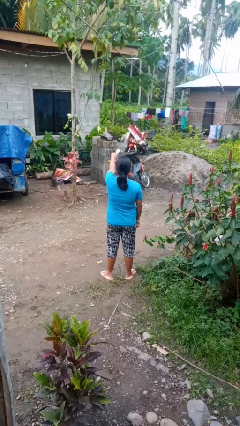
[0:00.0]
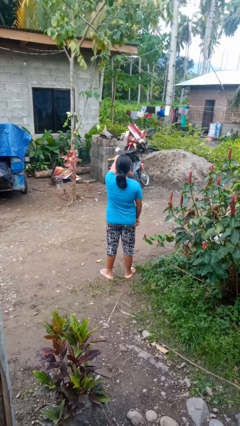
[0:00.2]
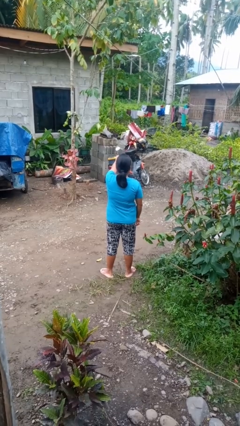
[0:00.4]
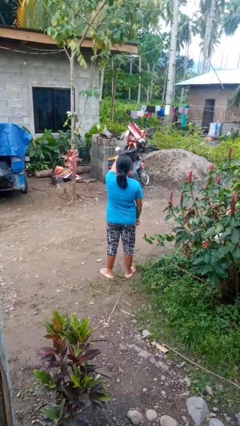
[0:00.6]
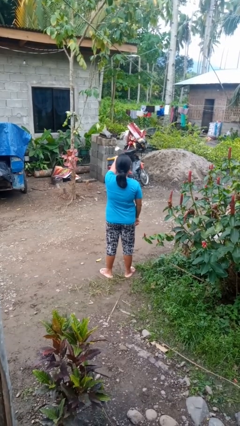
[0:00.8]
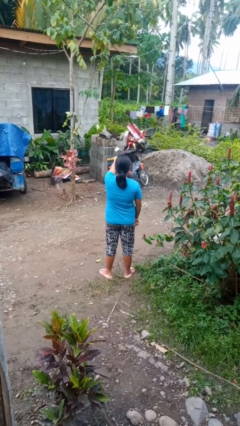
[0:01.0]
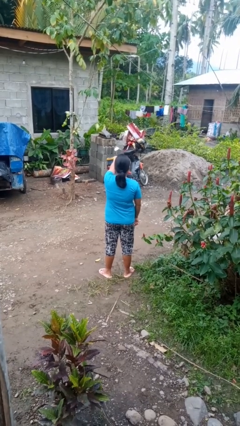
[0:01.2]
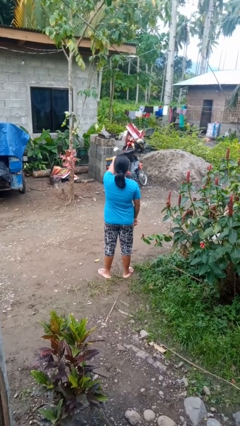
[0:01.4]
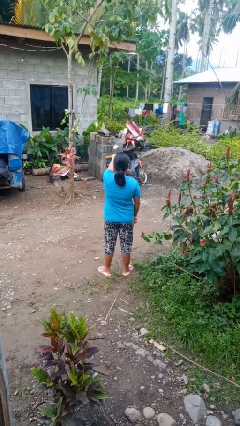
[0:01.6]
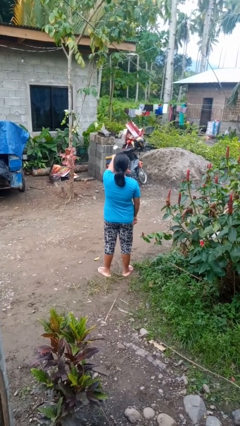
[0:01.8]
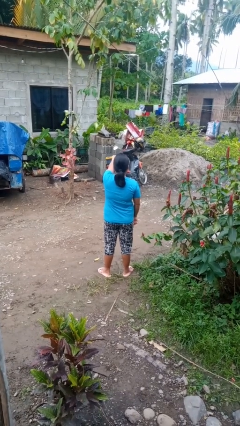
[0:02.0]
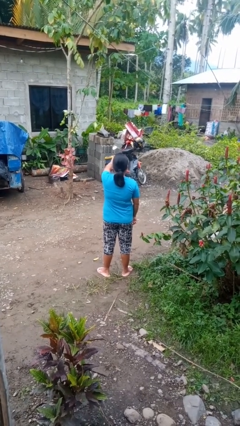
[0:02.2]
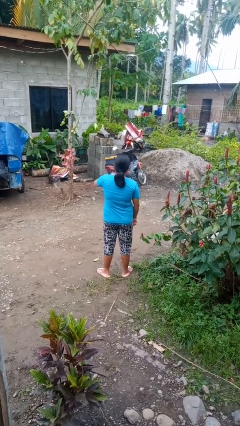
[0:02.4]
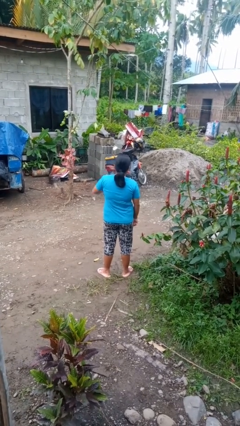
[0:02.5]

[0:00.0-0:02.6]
person gestures thumbs down

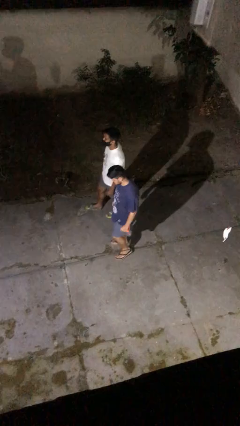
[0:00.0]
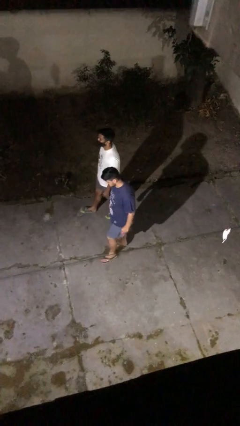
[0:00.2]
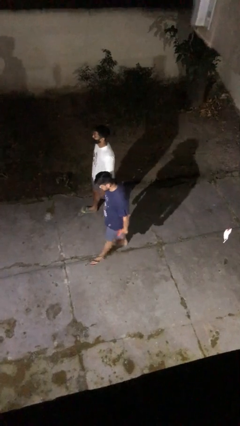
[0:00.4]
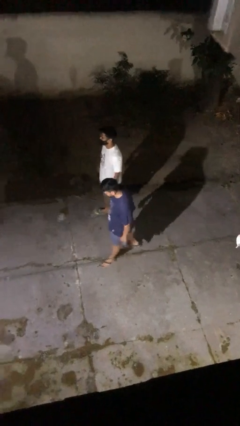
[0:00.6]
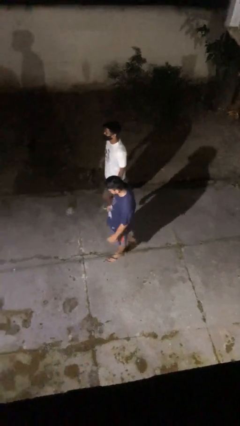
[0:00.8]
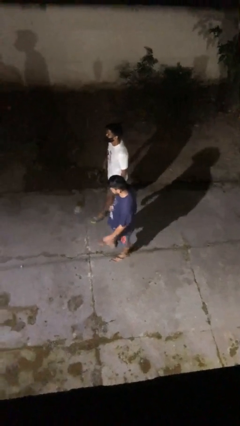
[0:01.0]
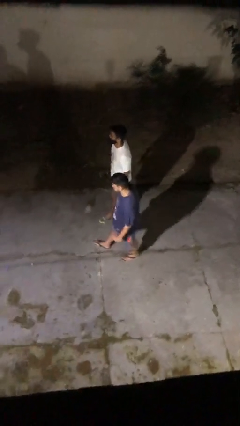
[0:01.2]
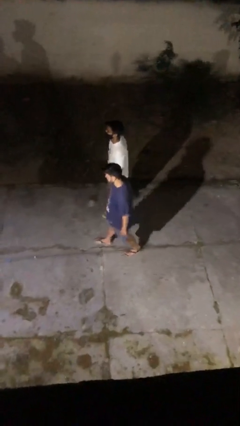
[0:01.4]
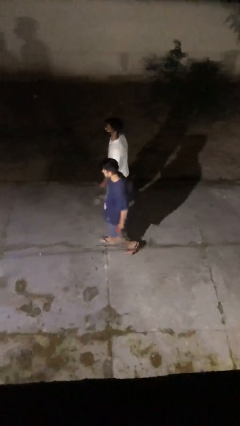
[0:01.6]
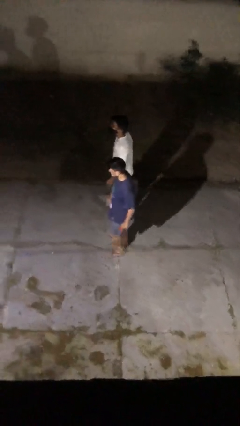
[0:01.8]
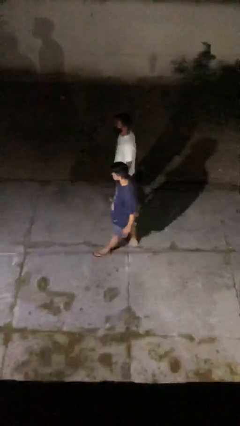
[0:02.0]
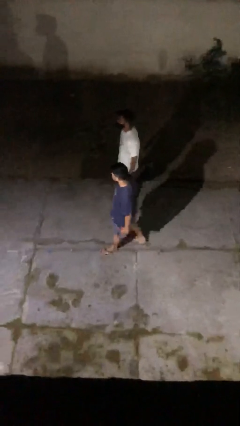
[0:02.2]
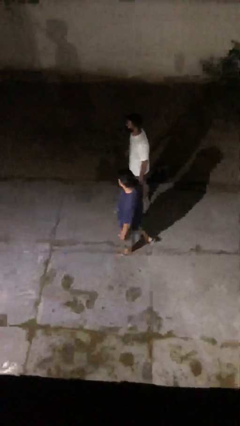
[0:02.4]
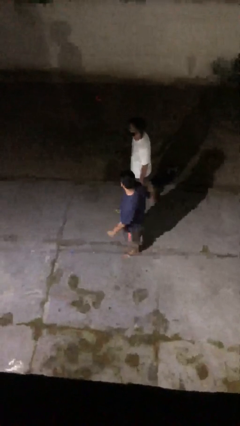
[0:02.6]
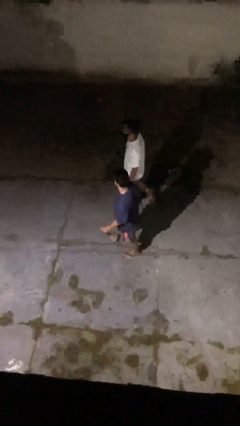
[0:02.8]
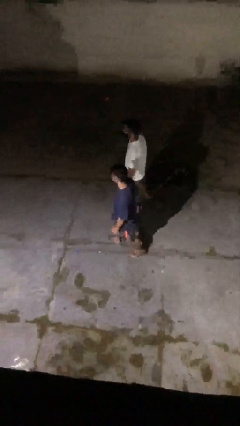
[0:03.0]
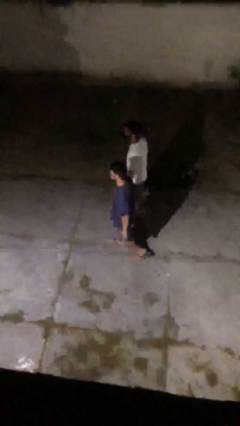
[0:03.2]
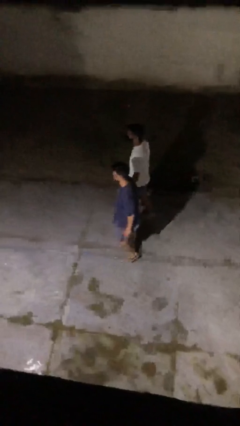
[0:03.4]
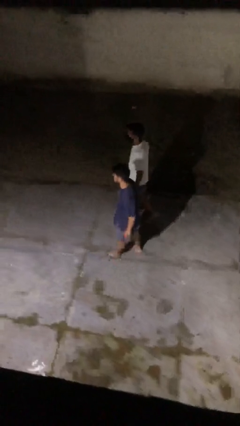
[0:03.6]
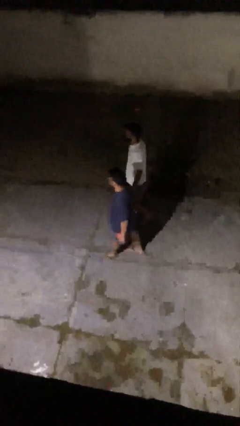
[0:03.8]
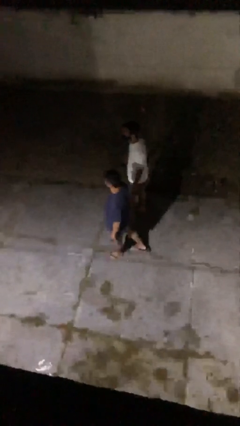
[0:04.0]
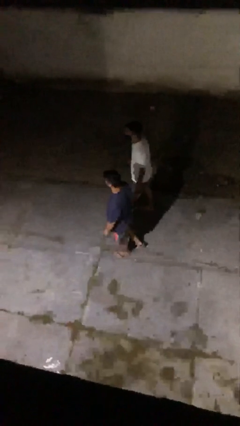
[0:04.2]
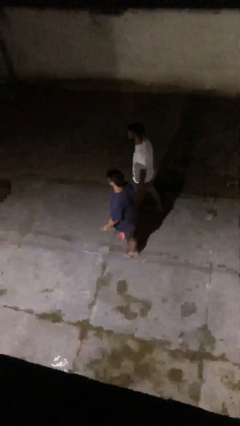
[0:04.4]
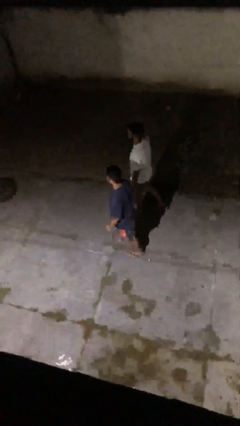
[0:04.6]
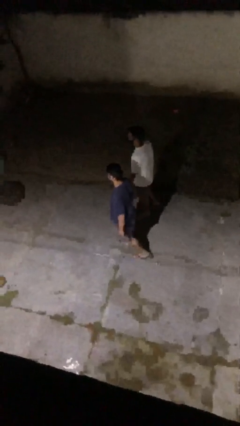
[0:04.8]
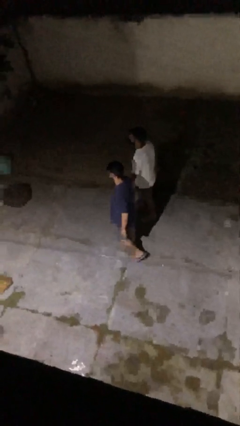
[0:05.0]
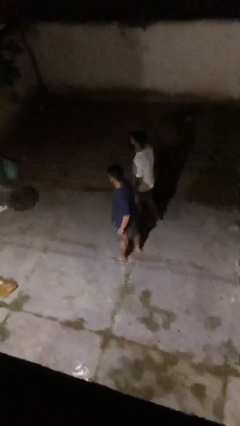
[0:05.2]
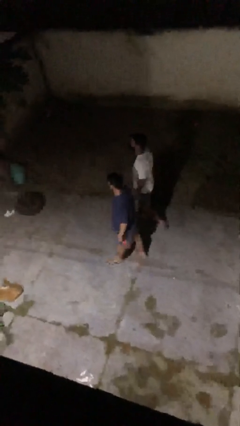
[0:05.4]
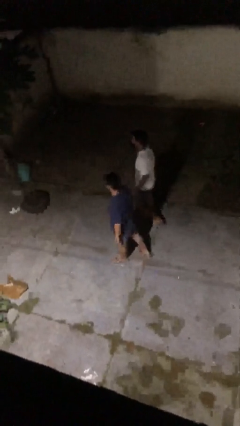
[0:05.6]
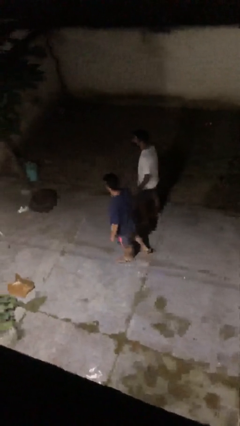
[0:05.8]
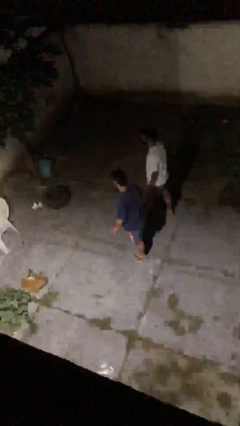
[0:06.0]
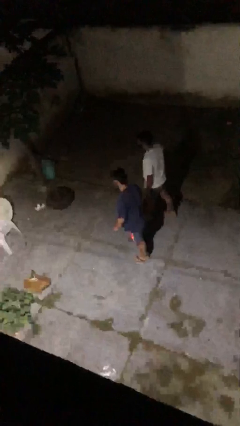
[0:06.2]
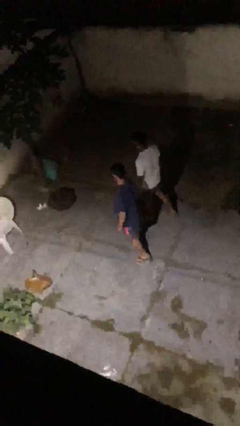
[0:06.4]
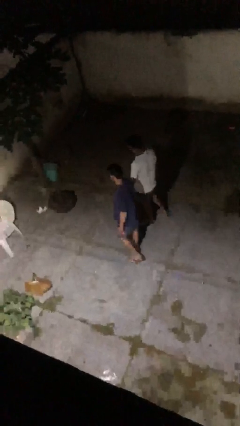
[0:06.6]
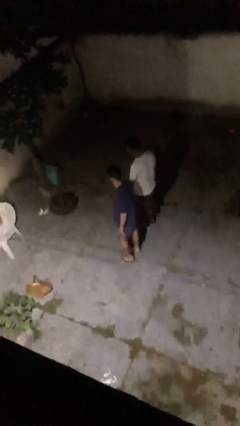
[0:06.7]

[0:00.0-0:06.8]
person talks to person

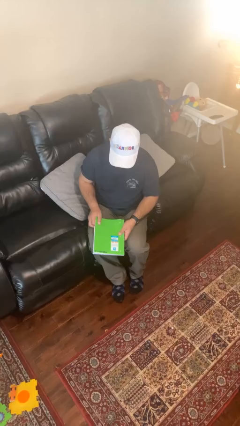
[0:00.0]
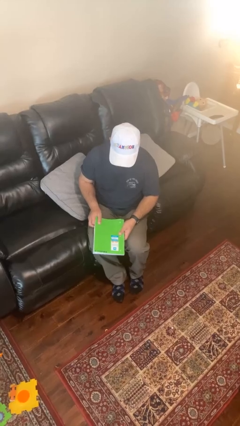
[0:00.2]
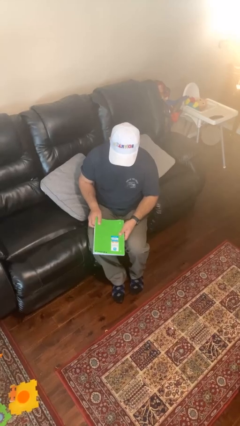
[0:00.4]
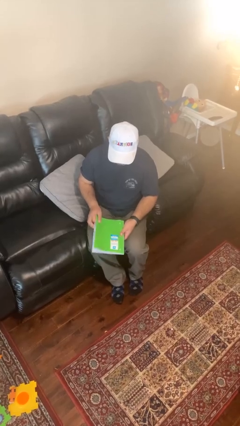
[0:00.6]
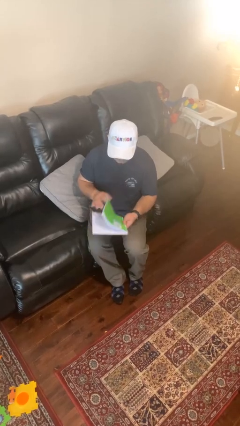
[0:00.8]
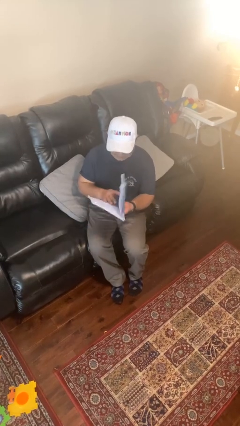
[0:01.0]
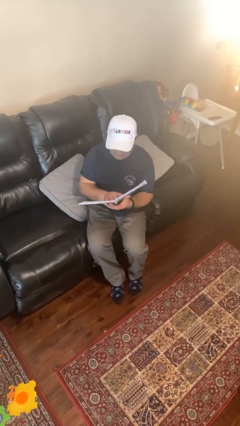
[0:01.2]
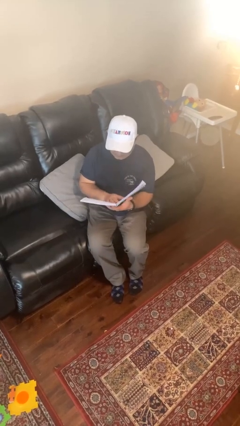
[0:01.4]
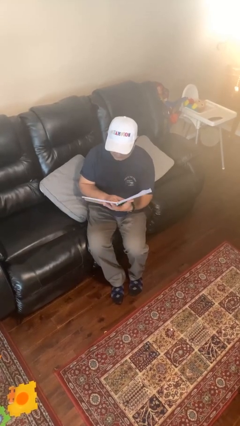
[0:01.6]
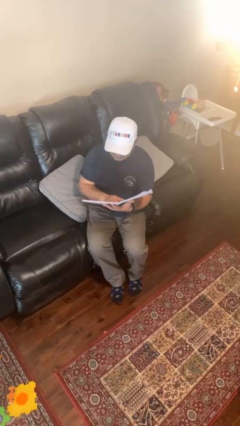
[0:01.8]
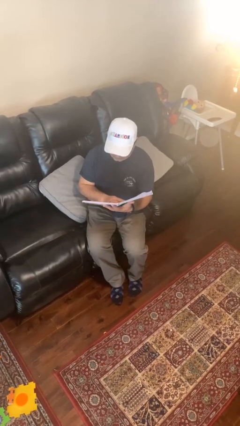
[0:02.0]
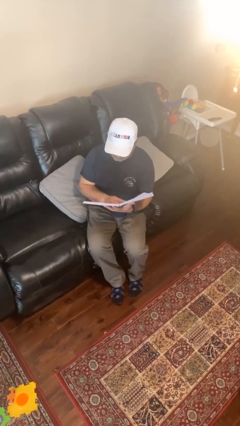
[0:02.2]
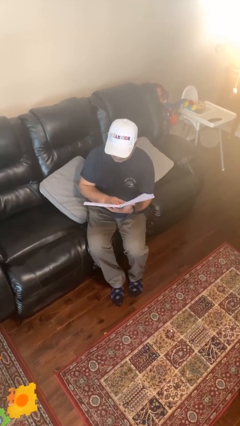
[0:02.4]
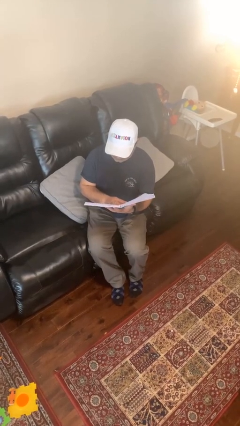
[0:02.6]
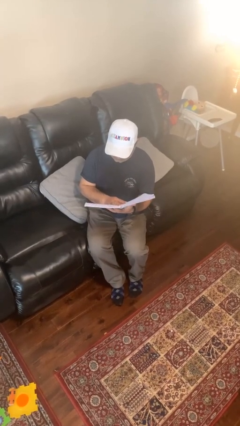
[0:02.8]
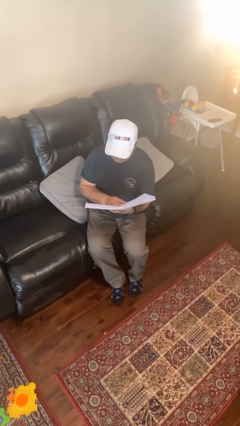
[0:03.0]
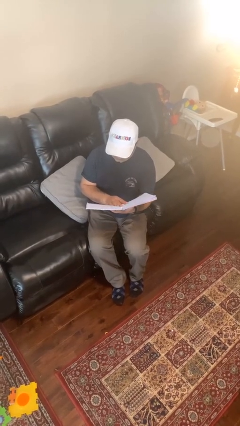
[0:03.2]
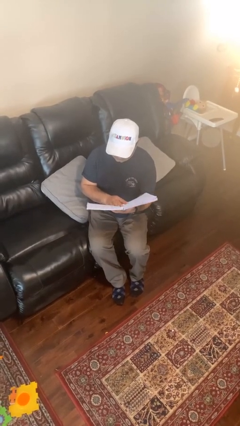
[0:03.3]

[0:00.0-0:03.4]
person reads document

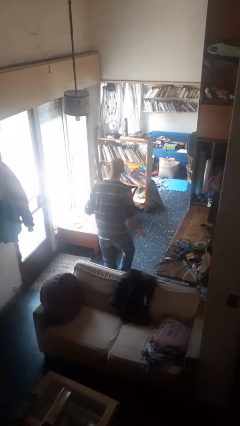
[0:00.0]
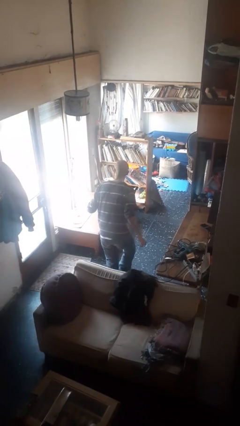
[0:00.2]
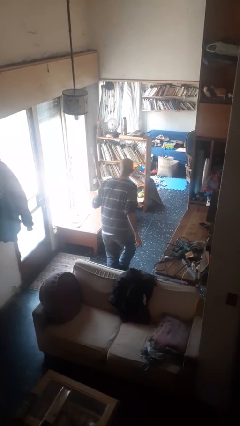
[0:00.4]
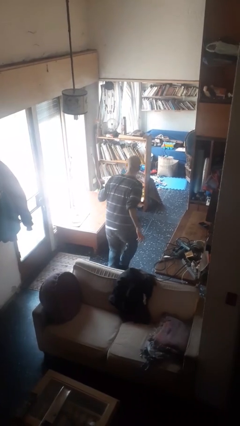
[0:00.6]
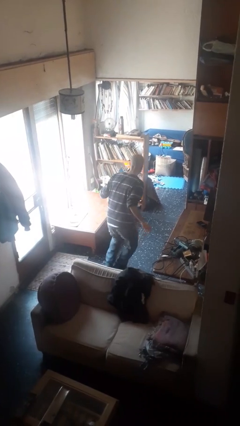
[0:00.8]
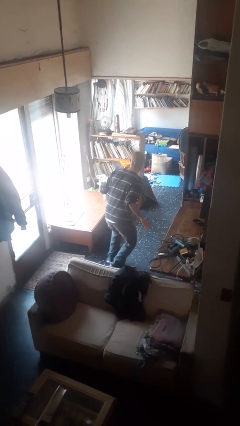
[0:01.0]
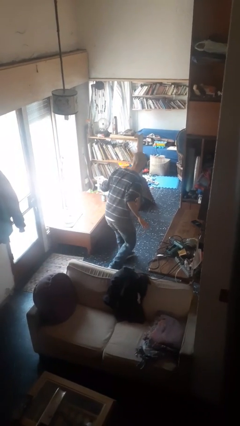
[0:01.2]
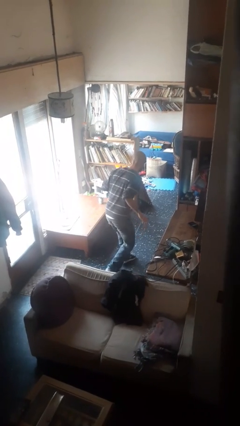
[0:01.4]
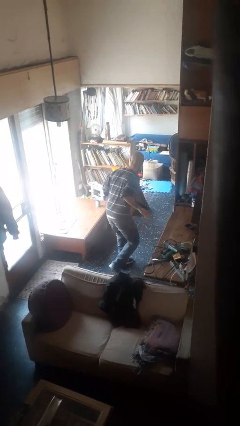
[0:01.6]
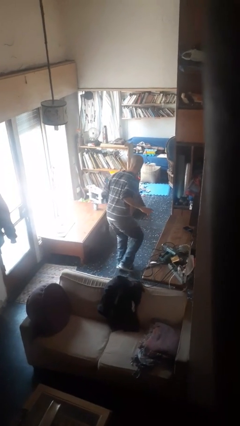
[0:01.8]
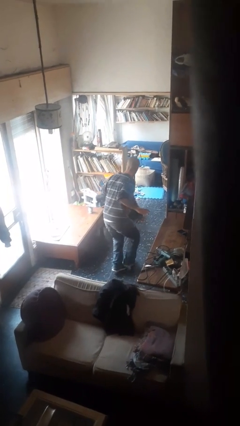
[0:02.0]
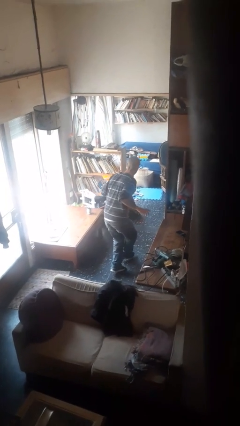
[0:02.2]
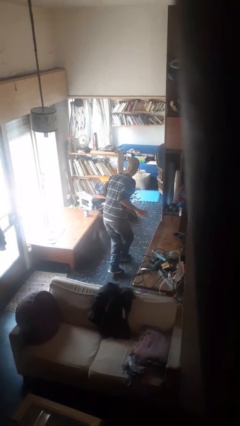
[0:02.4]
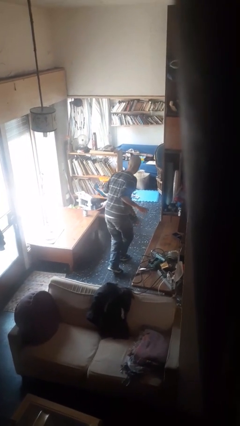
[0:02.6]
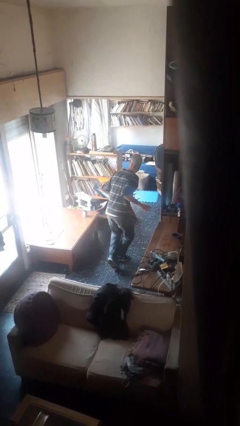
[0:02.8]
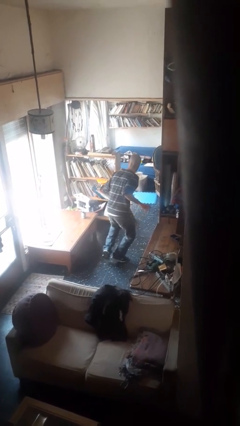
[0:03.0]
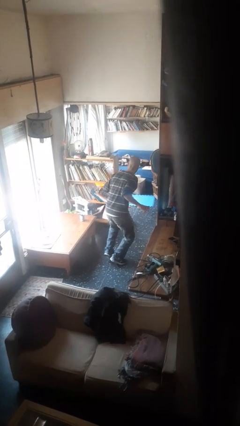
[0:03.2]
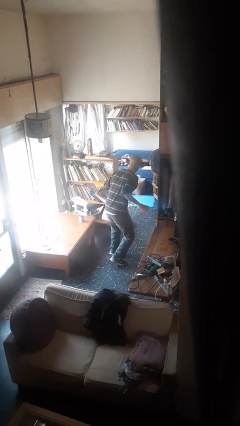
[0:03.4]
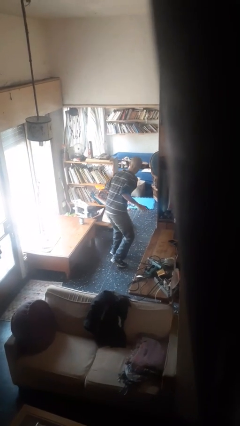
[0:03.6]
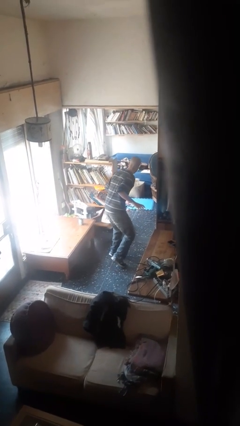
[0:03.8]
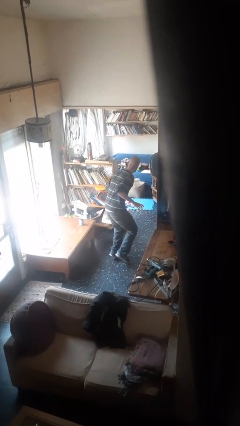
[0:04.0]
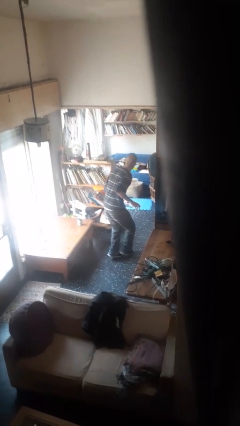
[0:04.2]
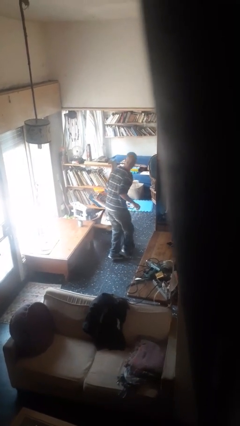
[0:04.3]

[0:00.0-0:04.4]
person walks tiptoe

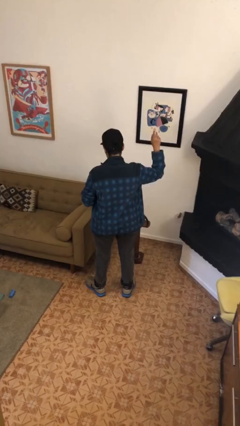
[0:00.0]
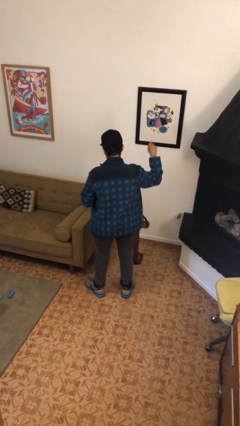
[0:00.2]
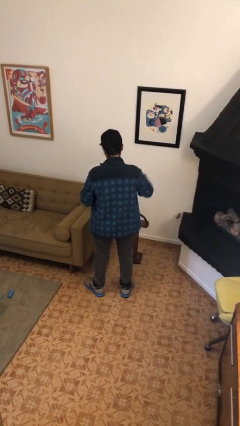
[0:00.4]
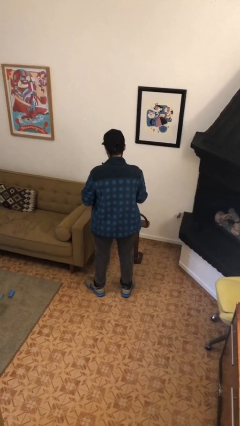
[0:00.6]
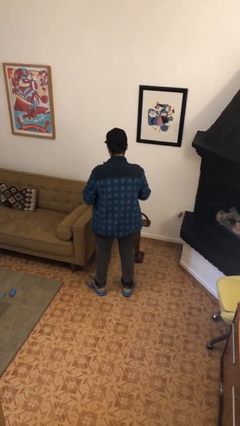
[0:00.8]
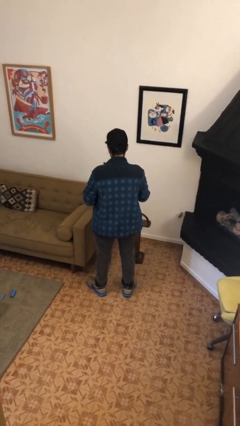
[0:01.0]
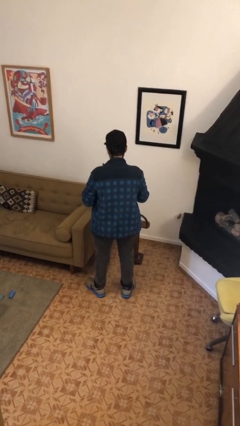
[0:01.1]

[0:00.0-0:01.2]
person gestures lower hand
